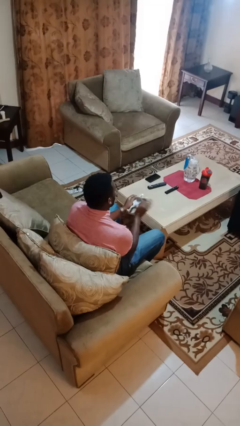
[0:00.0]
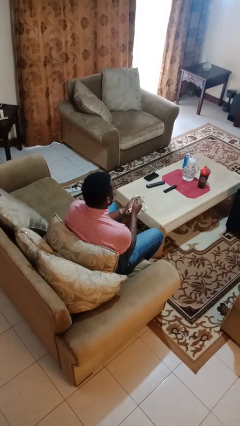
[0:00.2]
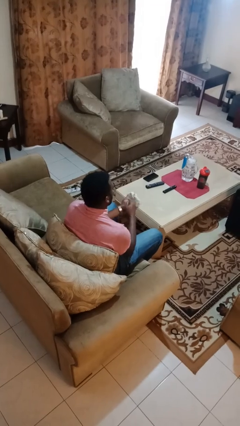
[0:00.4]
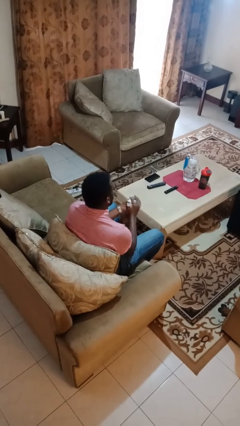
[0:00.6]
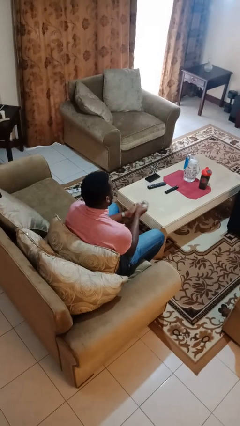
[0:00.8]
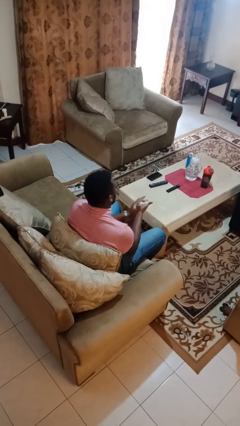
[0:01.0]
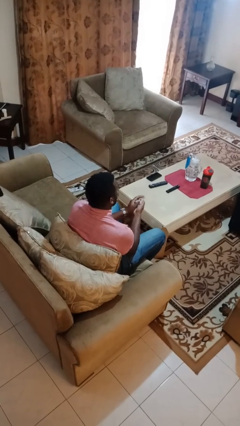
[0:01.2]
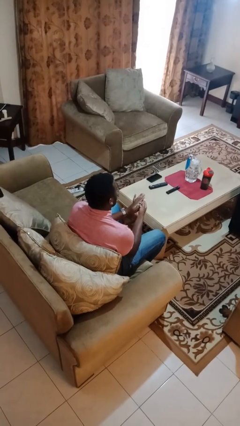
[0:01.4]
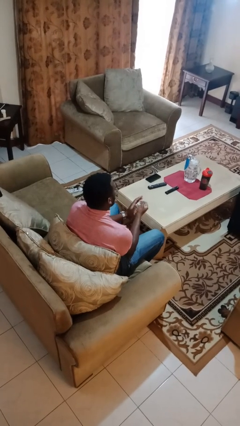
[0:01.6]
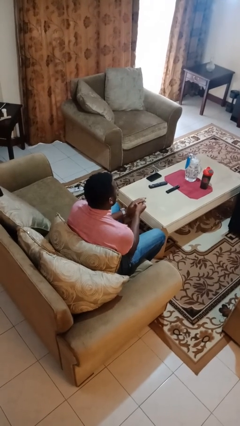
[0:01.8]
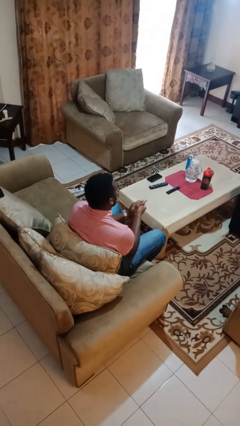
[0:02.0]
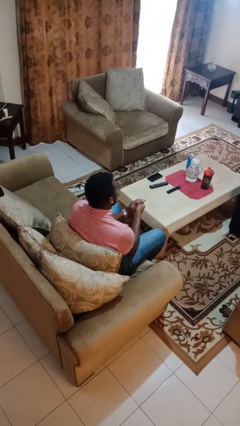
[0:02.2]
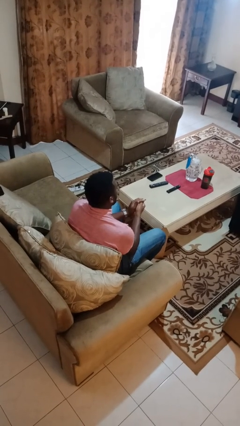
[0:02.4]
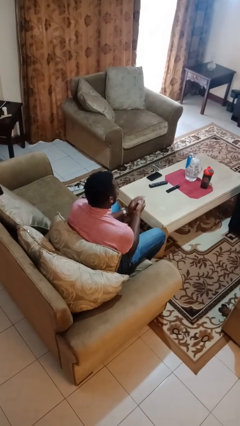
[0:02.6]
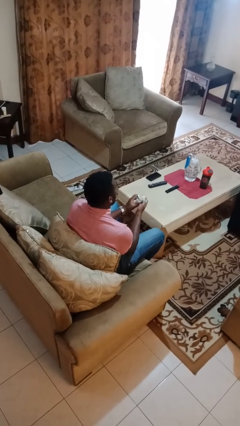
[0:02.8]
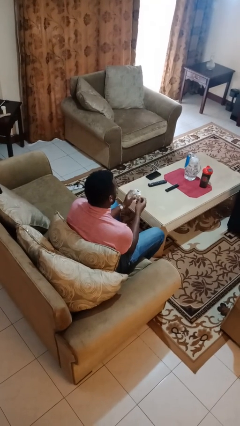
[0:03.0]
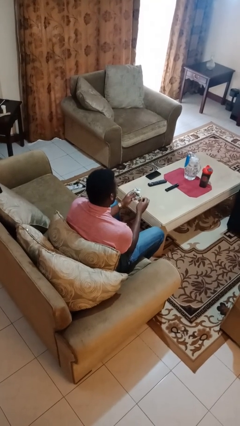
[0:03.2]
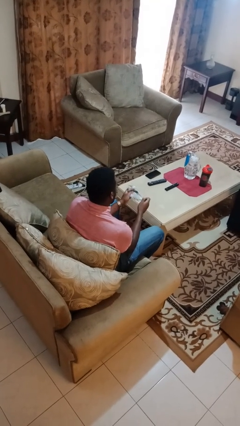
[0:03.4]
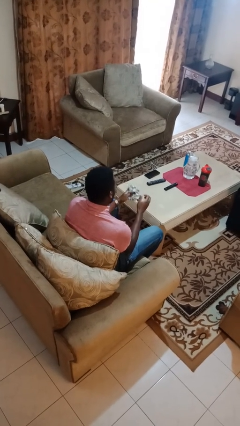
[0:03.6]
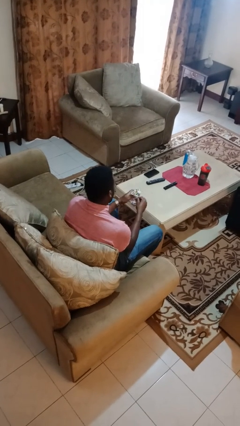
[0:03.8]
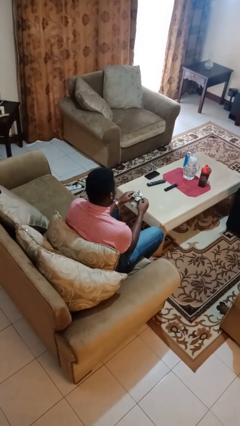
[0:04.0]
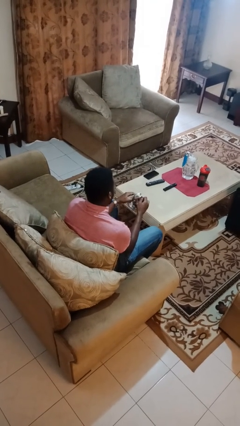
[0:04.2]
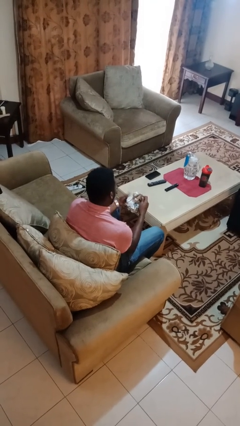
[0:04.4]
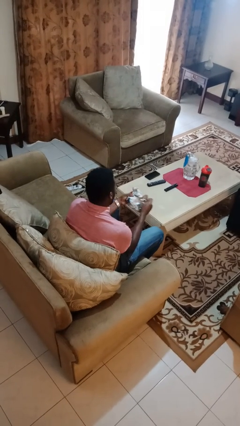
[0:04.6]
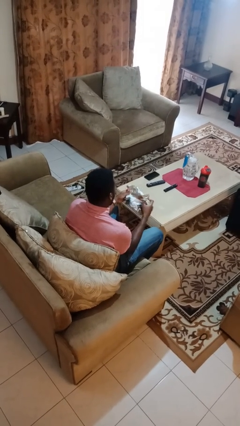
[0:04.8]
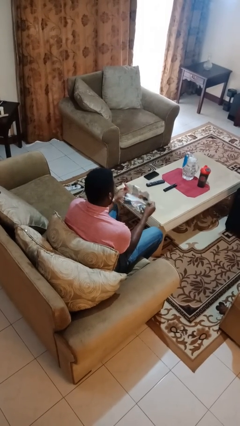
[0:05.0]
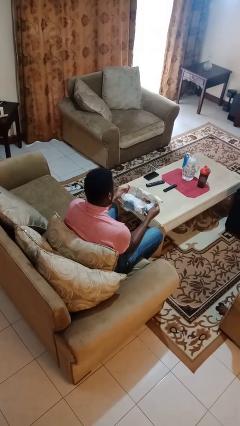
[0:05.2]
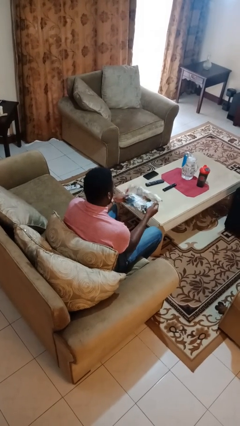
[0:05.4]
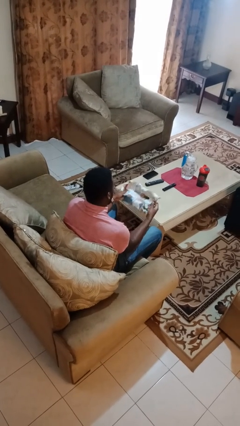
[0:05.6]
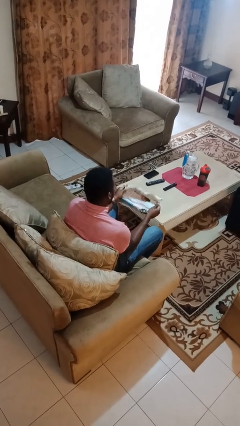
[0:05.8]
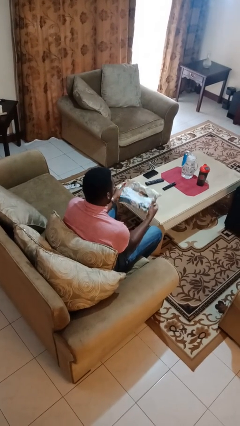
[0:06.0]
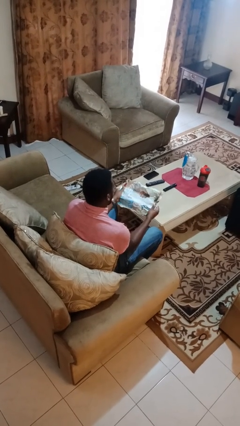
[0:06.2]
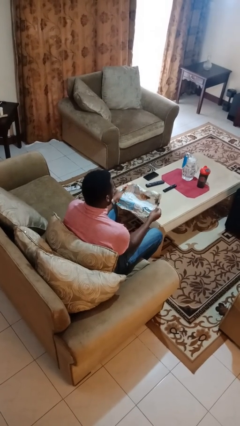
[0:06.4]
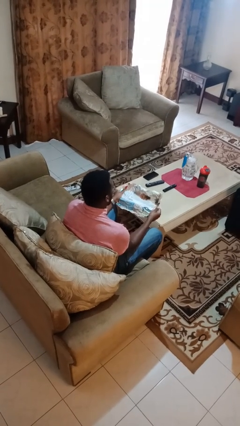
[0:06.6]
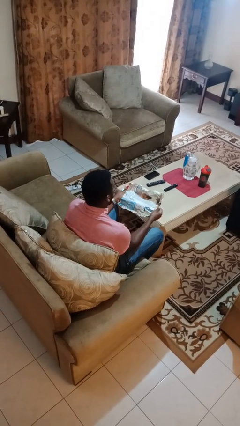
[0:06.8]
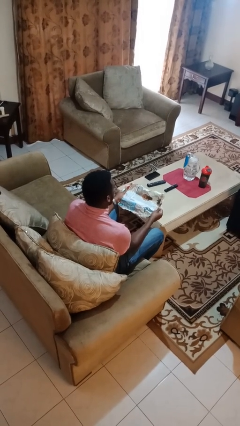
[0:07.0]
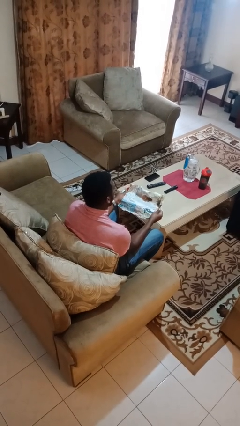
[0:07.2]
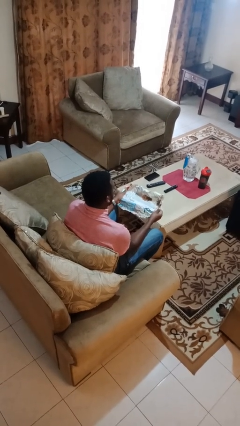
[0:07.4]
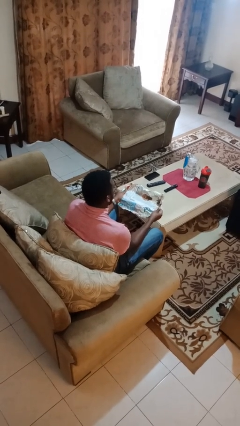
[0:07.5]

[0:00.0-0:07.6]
person crumples paper

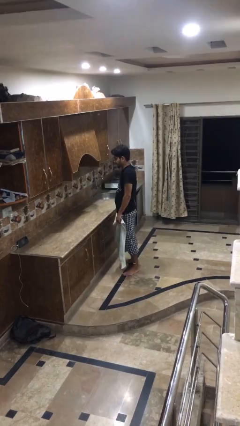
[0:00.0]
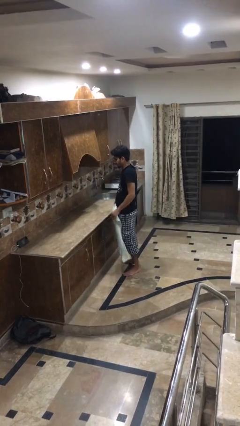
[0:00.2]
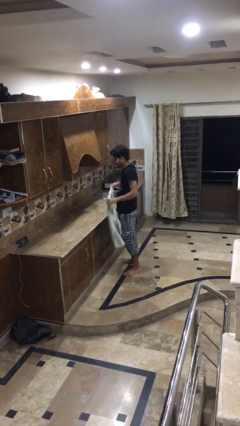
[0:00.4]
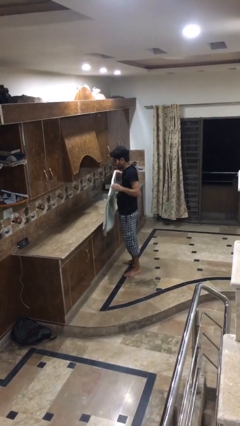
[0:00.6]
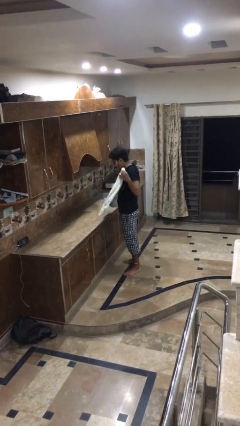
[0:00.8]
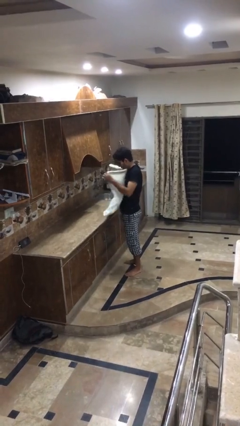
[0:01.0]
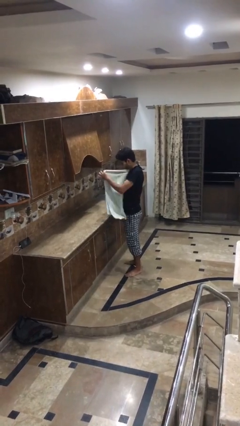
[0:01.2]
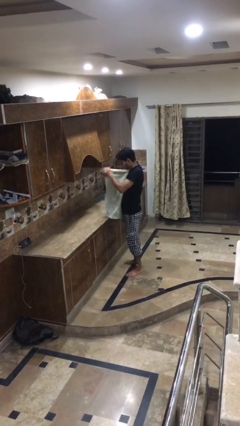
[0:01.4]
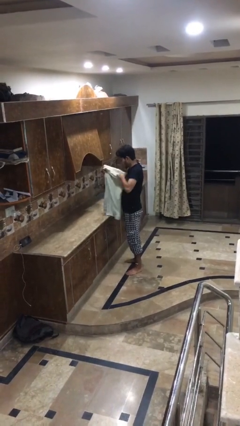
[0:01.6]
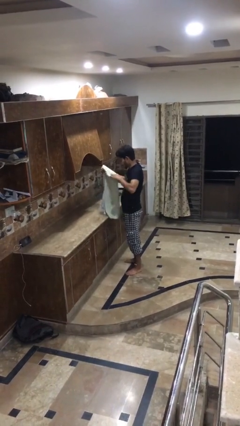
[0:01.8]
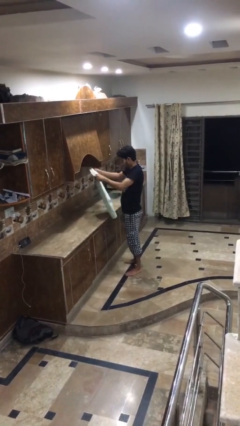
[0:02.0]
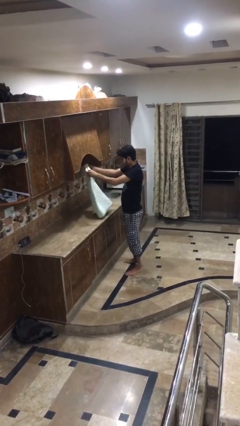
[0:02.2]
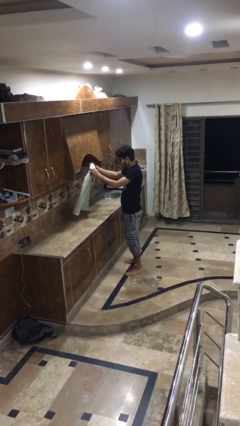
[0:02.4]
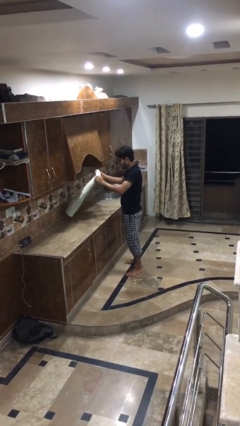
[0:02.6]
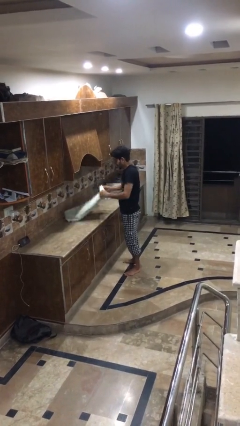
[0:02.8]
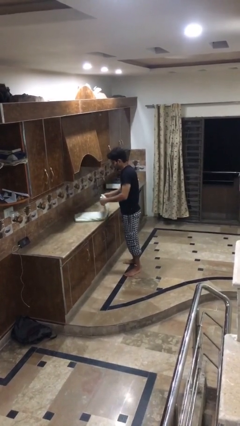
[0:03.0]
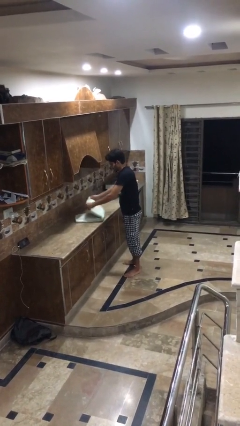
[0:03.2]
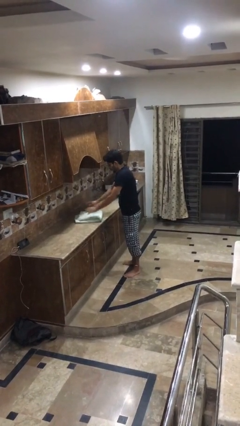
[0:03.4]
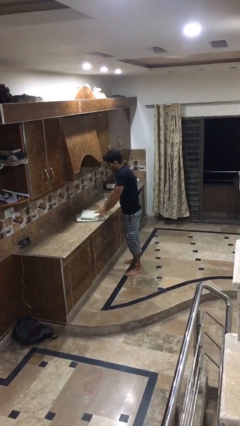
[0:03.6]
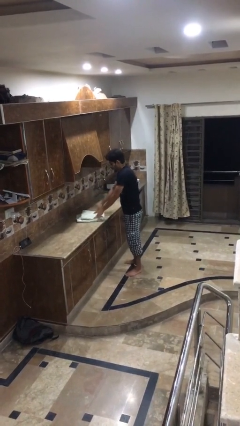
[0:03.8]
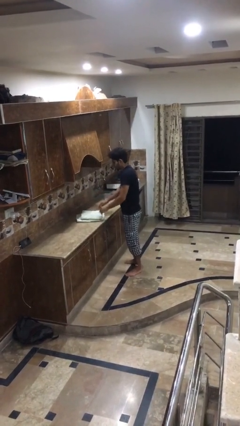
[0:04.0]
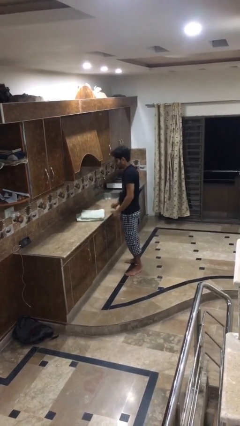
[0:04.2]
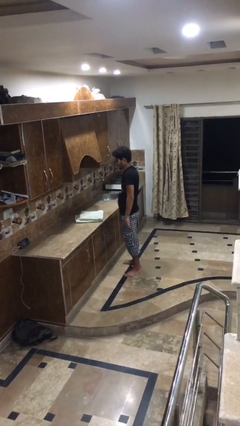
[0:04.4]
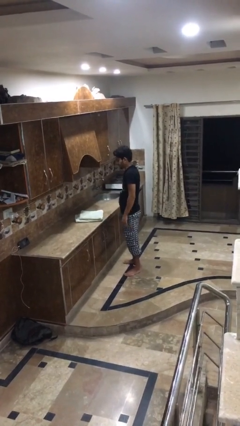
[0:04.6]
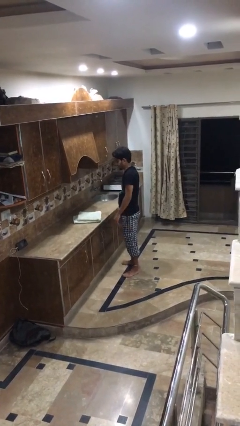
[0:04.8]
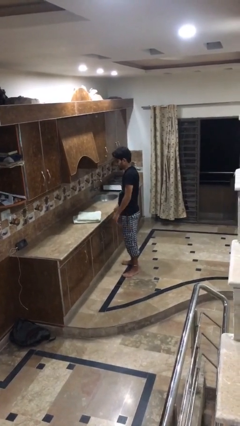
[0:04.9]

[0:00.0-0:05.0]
person folds towel

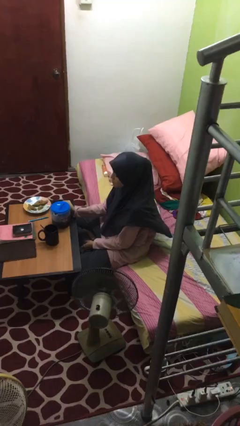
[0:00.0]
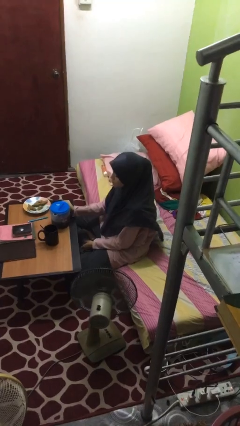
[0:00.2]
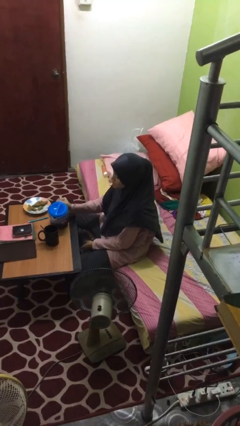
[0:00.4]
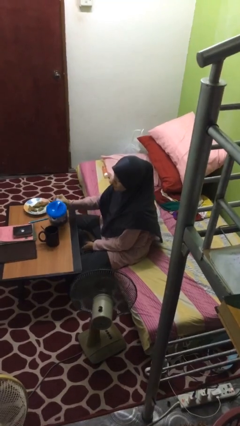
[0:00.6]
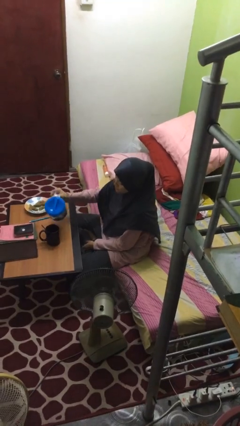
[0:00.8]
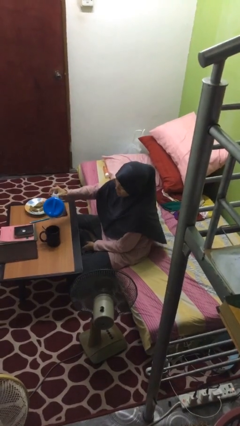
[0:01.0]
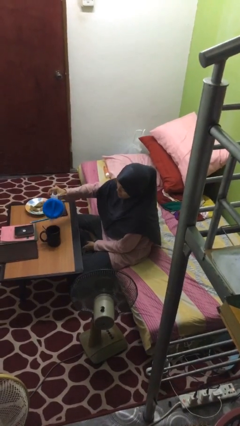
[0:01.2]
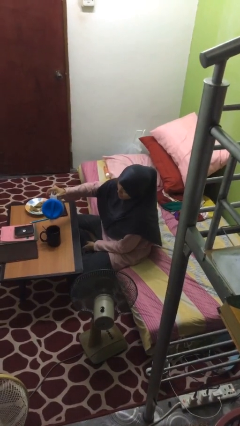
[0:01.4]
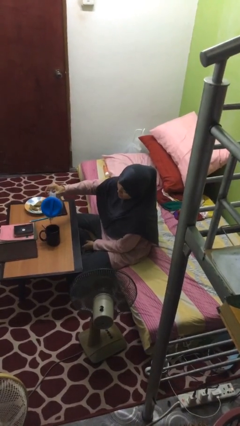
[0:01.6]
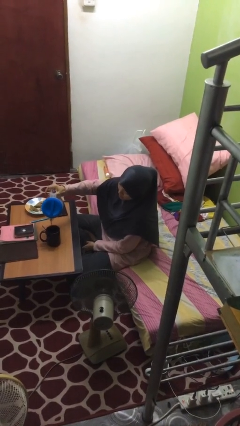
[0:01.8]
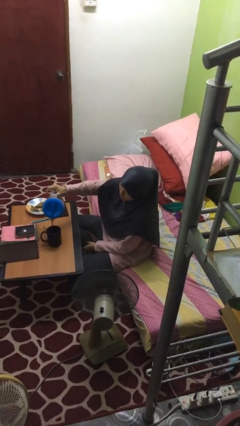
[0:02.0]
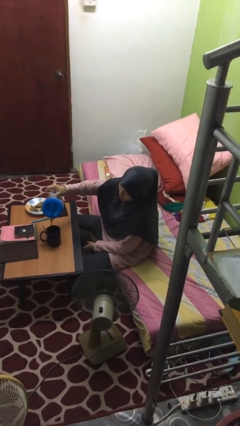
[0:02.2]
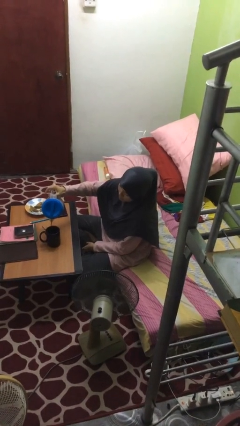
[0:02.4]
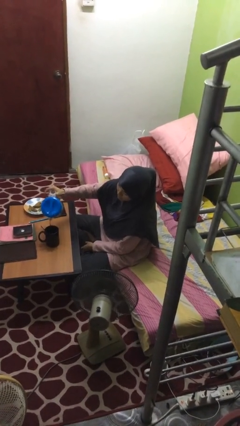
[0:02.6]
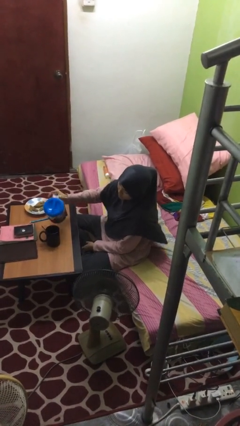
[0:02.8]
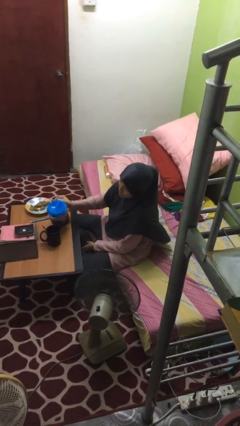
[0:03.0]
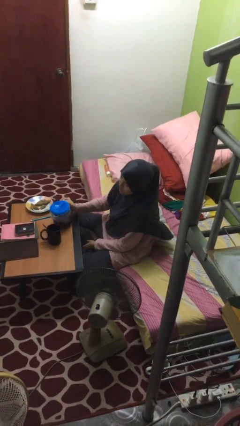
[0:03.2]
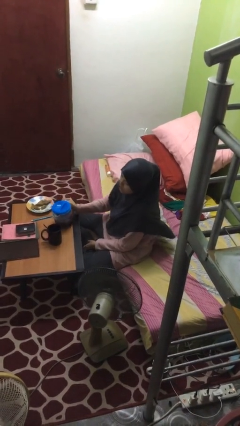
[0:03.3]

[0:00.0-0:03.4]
person pours coffee into mug

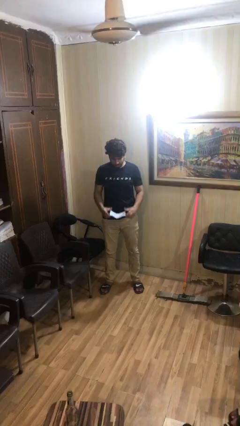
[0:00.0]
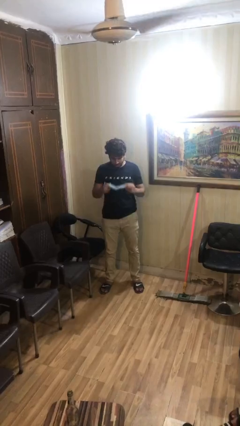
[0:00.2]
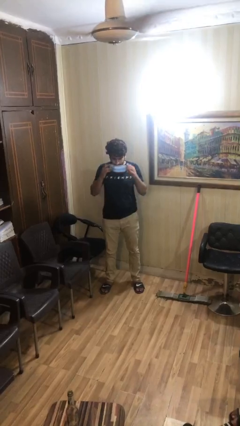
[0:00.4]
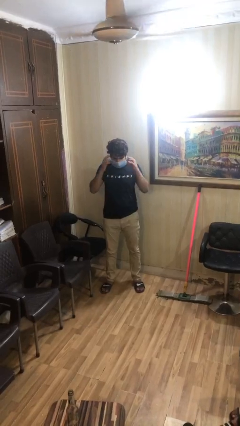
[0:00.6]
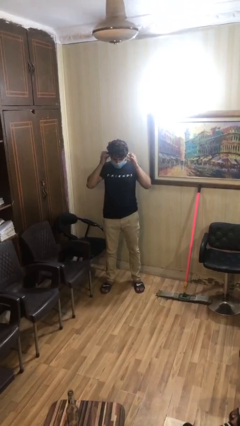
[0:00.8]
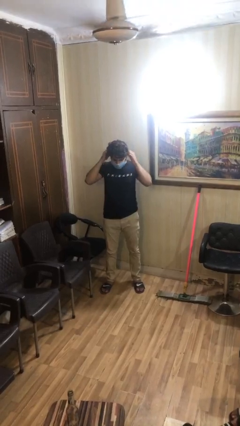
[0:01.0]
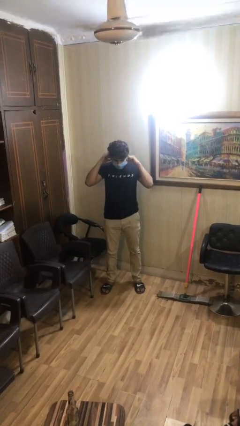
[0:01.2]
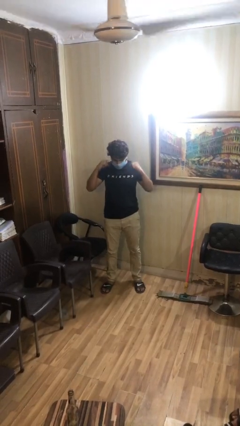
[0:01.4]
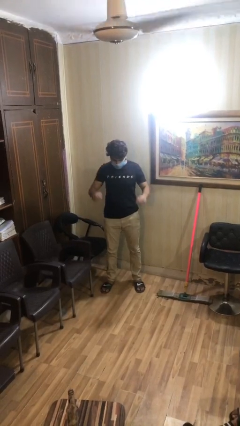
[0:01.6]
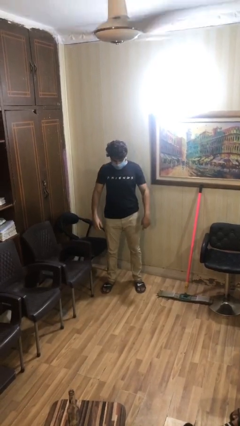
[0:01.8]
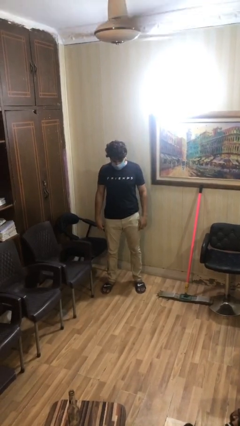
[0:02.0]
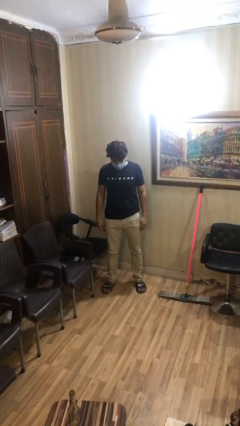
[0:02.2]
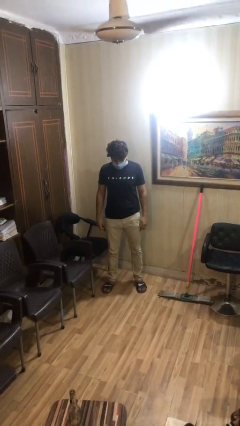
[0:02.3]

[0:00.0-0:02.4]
person puts on facemask
